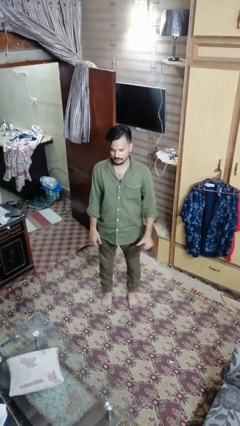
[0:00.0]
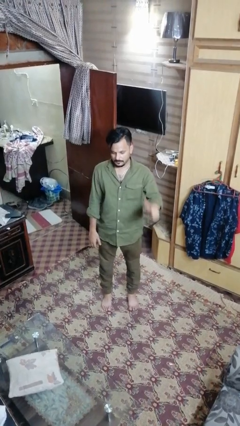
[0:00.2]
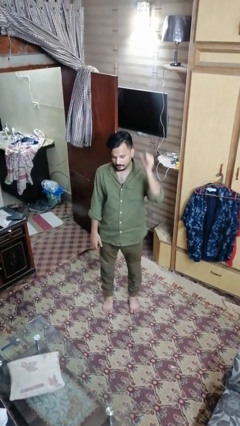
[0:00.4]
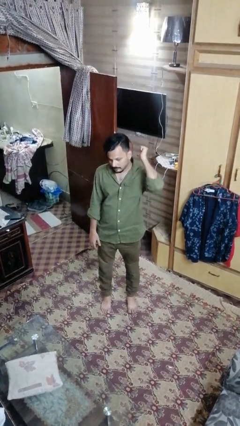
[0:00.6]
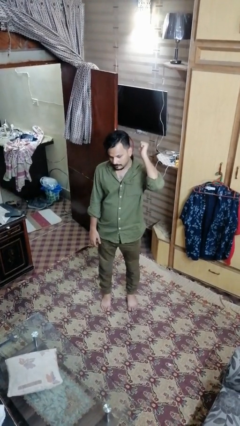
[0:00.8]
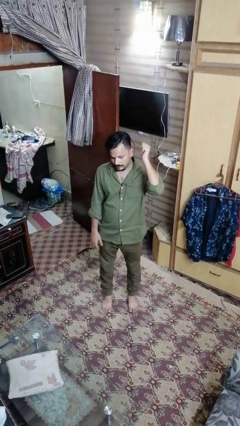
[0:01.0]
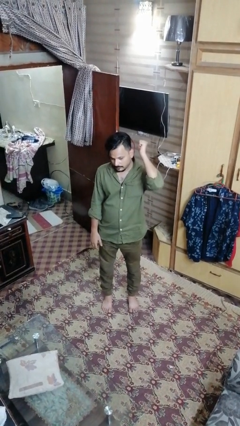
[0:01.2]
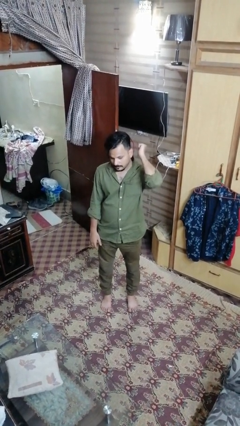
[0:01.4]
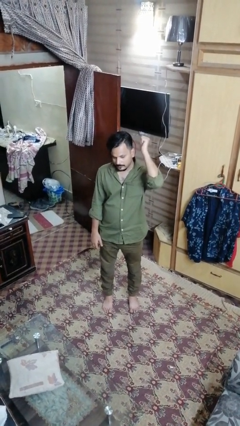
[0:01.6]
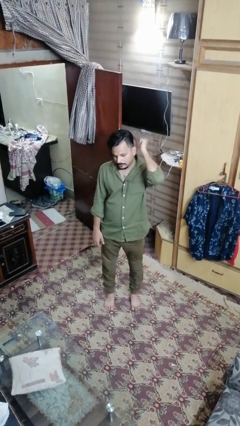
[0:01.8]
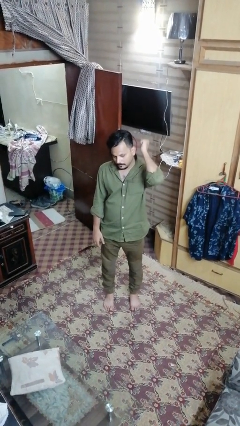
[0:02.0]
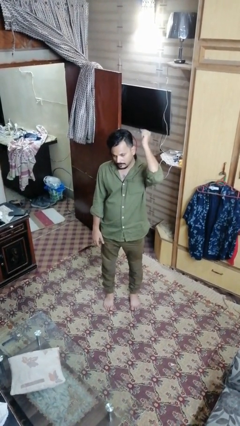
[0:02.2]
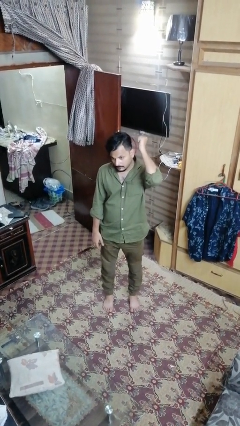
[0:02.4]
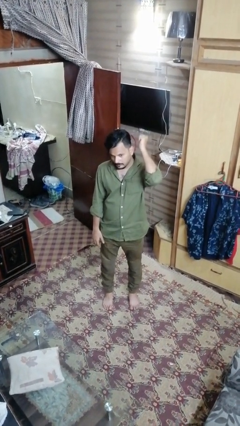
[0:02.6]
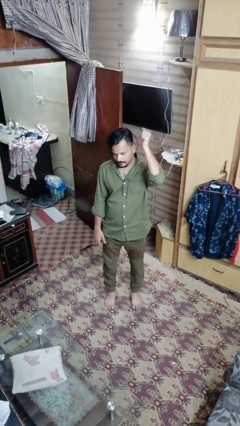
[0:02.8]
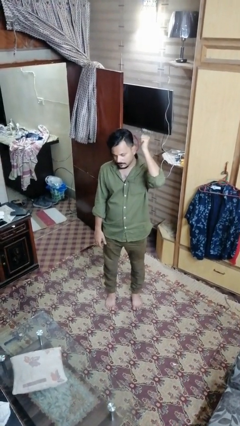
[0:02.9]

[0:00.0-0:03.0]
person gestures behind me

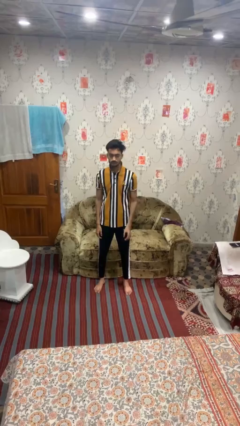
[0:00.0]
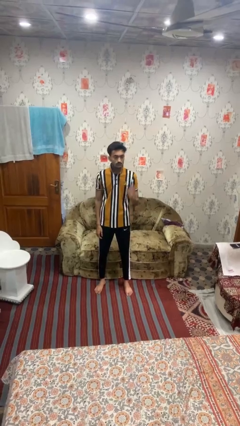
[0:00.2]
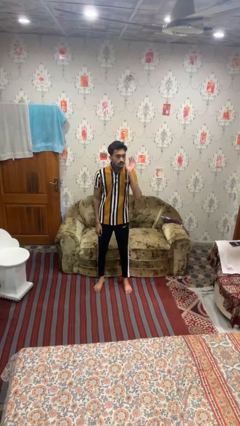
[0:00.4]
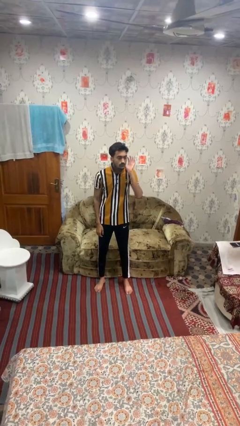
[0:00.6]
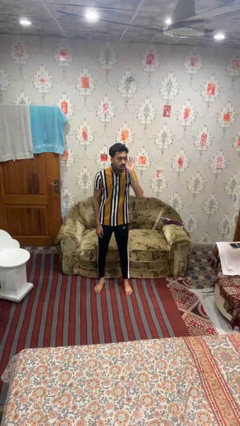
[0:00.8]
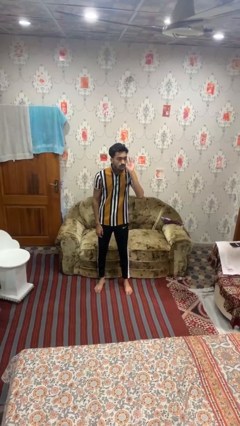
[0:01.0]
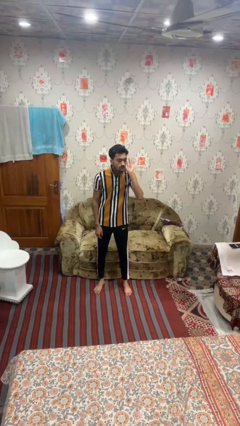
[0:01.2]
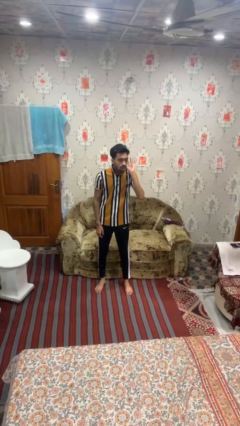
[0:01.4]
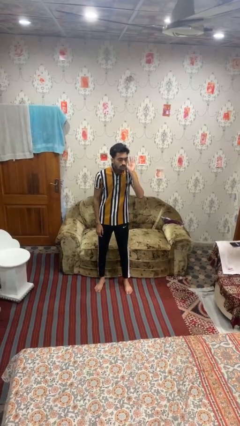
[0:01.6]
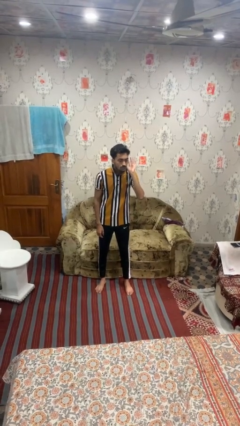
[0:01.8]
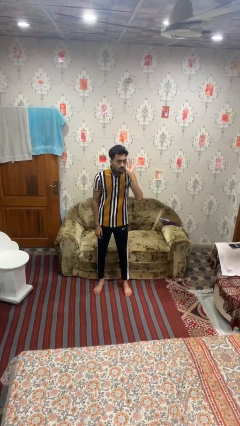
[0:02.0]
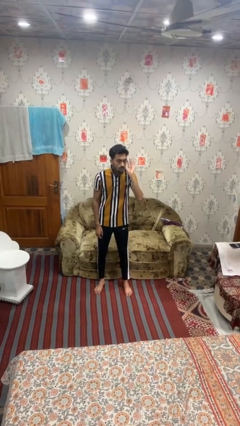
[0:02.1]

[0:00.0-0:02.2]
person gestures listen closely

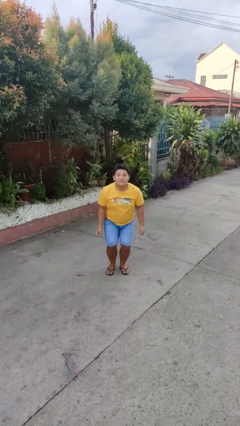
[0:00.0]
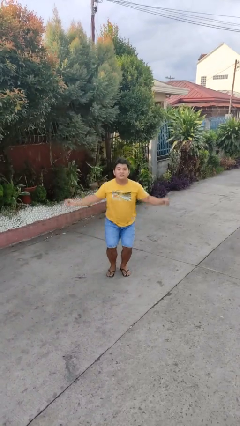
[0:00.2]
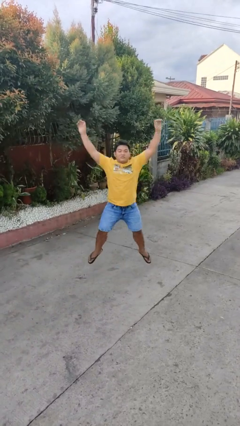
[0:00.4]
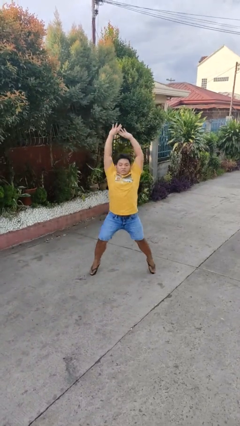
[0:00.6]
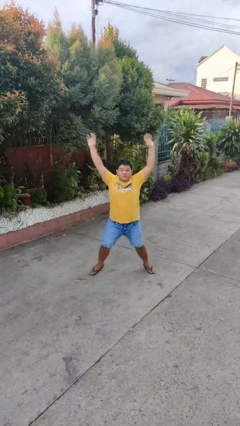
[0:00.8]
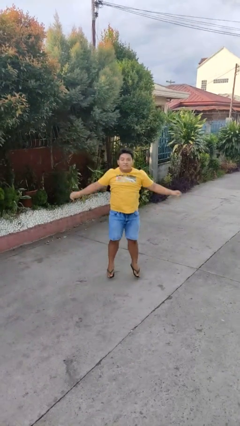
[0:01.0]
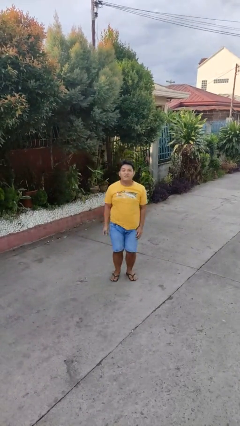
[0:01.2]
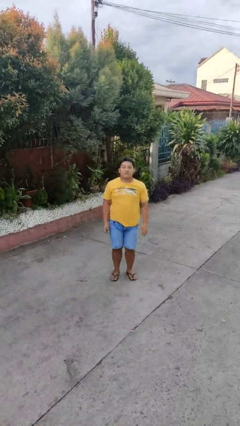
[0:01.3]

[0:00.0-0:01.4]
person exercises with jumping jacks

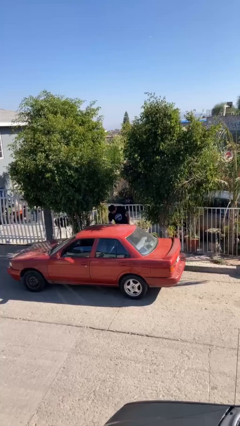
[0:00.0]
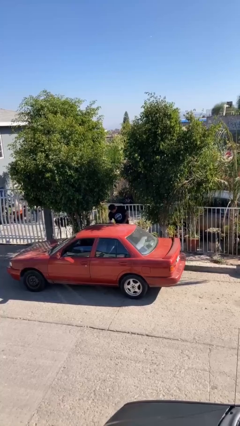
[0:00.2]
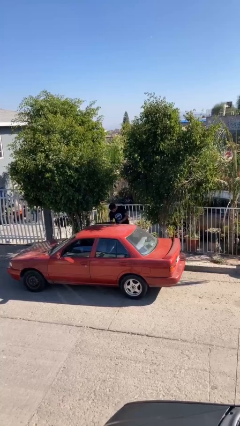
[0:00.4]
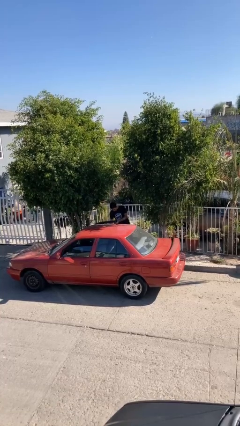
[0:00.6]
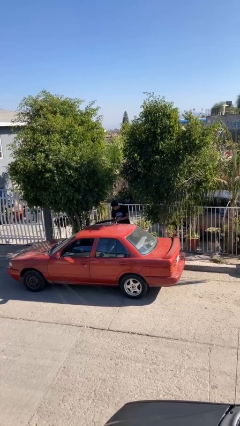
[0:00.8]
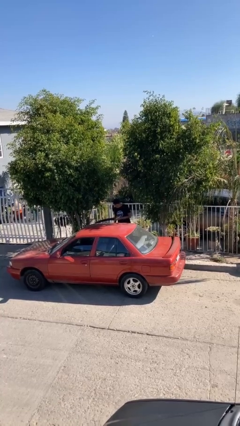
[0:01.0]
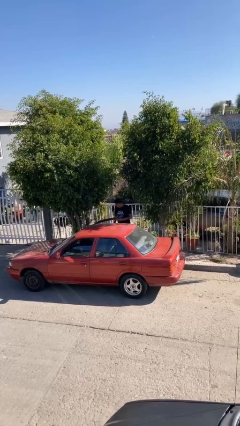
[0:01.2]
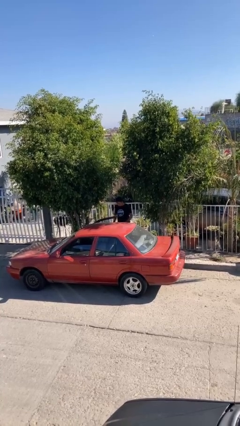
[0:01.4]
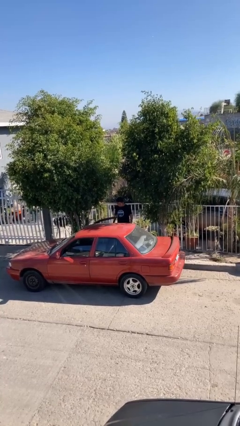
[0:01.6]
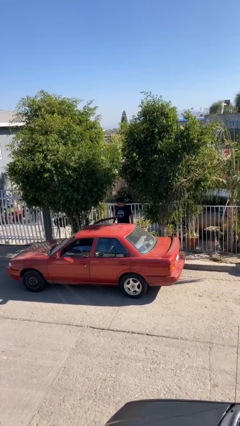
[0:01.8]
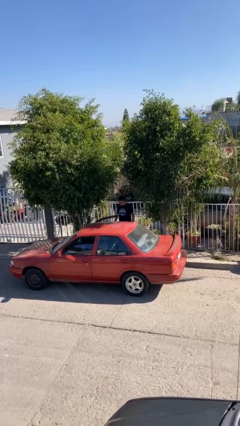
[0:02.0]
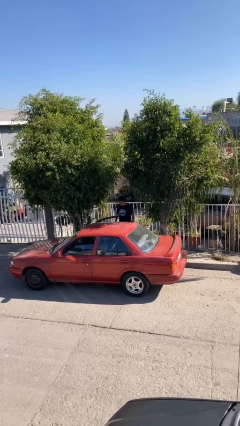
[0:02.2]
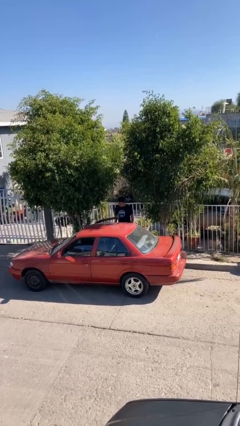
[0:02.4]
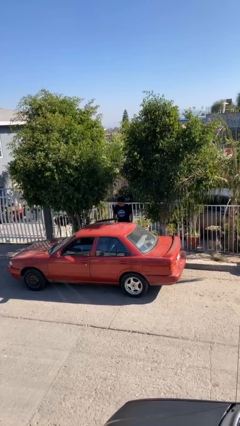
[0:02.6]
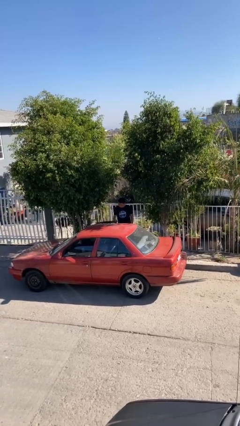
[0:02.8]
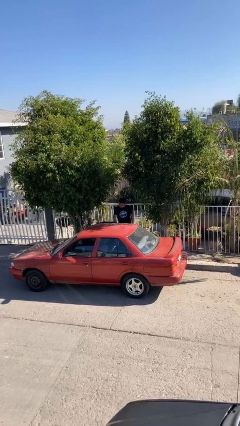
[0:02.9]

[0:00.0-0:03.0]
person opens car door

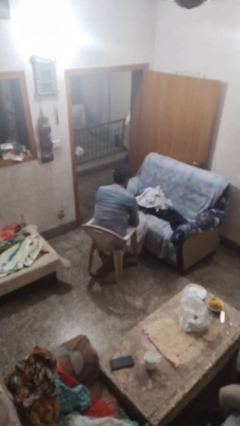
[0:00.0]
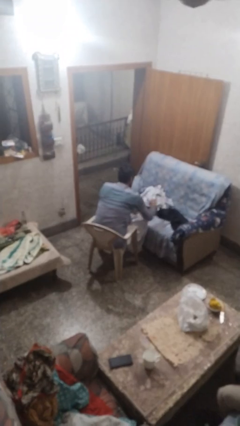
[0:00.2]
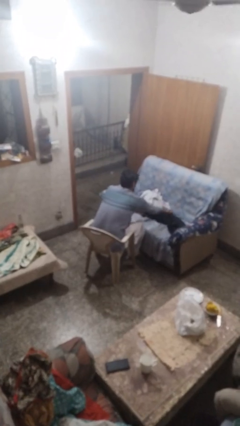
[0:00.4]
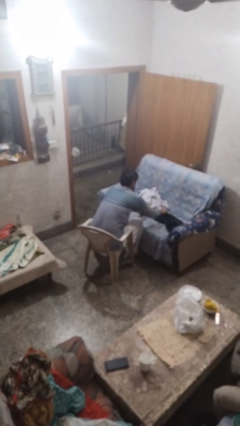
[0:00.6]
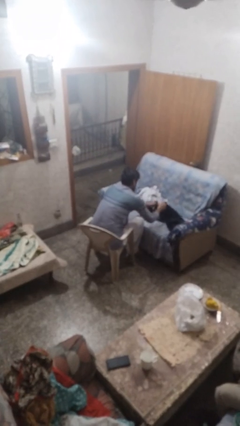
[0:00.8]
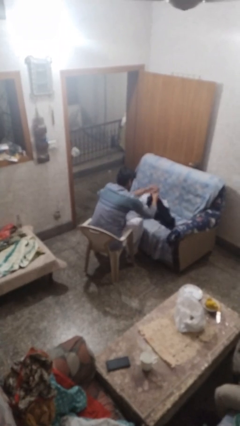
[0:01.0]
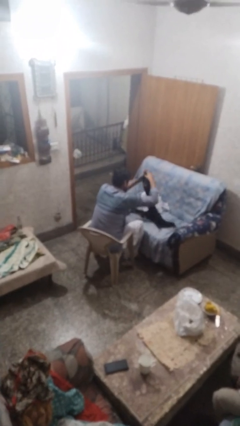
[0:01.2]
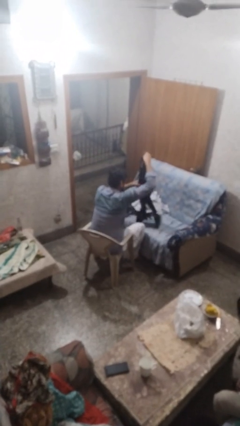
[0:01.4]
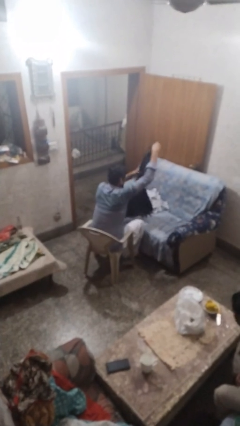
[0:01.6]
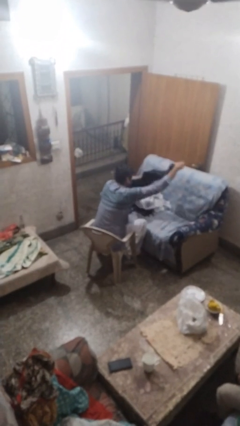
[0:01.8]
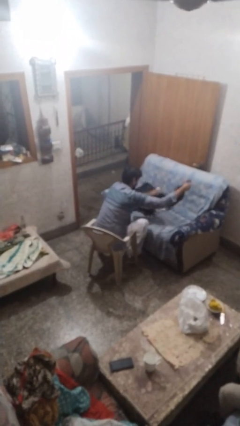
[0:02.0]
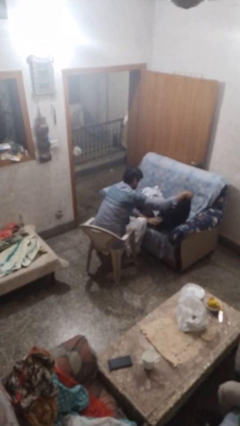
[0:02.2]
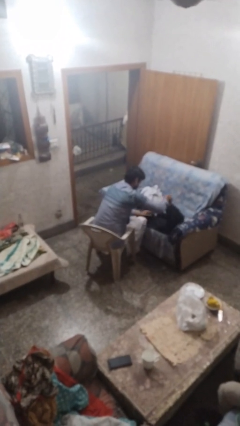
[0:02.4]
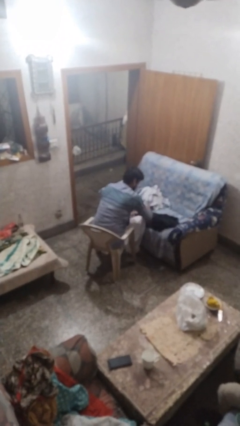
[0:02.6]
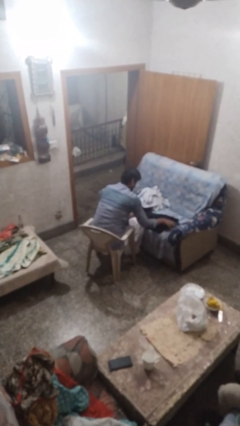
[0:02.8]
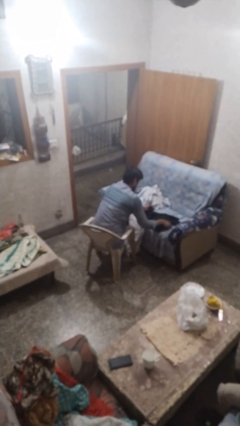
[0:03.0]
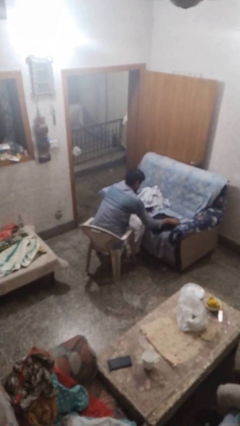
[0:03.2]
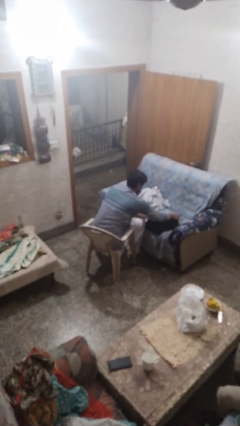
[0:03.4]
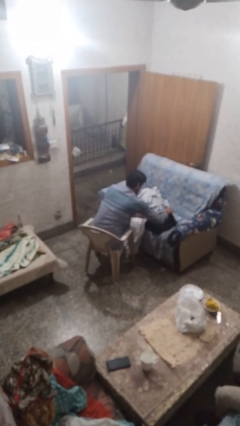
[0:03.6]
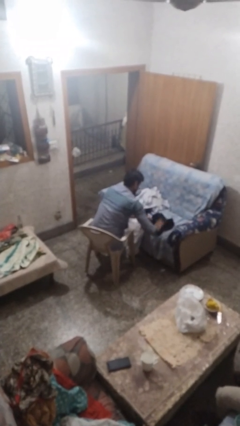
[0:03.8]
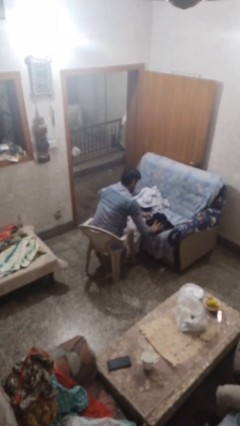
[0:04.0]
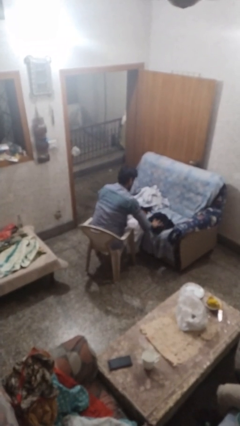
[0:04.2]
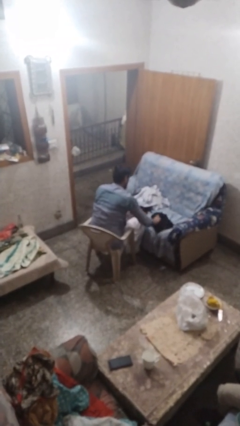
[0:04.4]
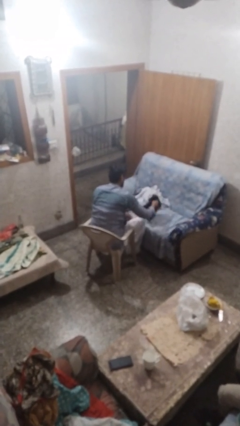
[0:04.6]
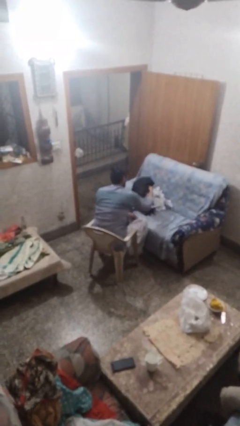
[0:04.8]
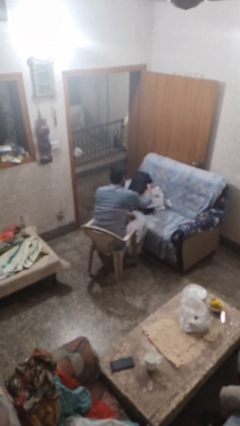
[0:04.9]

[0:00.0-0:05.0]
person folds pants

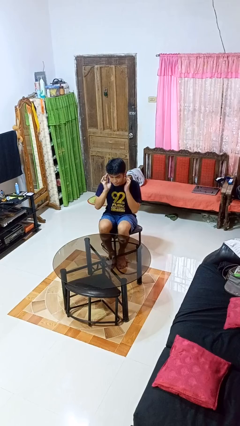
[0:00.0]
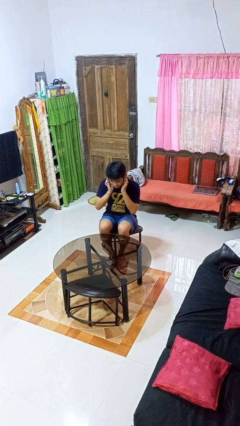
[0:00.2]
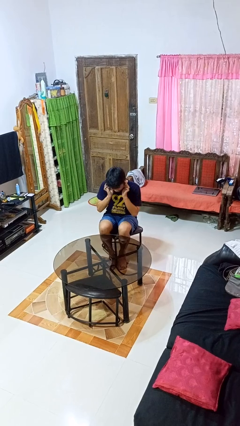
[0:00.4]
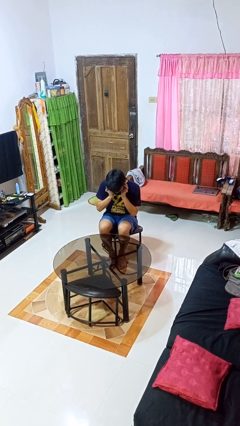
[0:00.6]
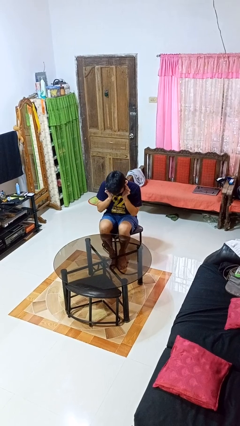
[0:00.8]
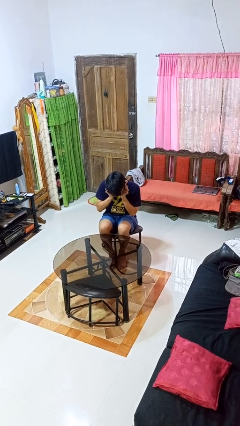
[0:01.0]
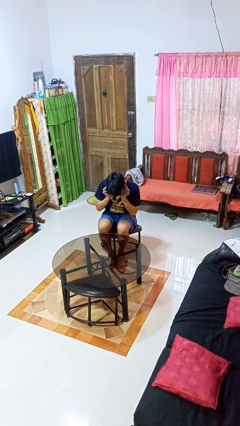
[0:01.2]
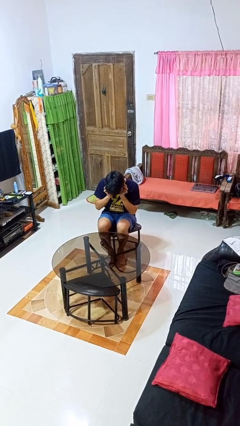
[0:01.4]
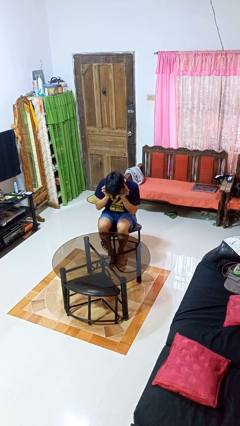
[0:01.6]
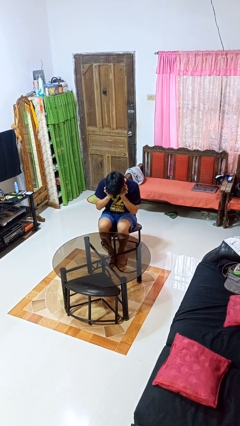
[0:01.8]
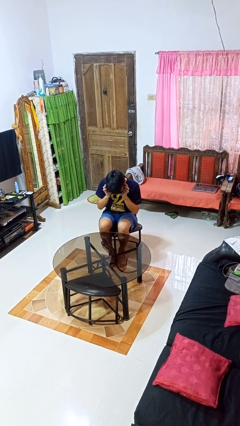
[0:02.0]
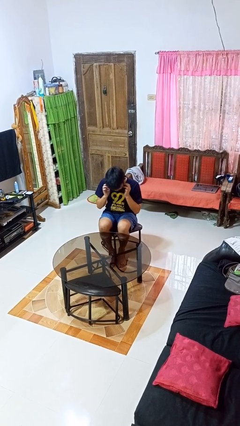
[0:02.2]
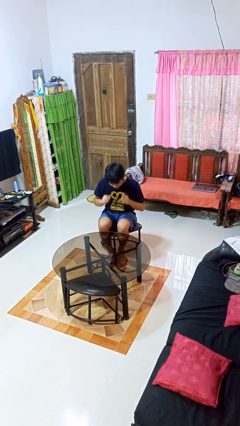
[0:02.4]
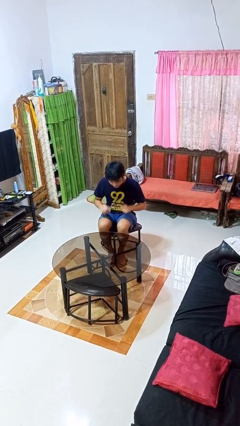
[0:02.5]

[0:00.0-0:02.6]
person puts fingers in ear
